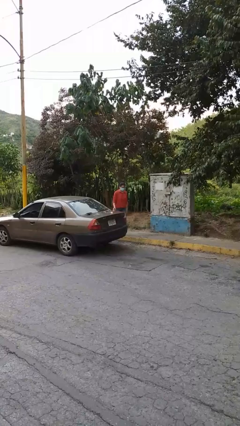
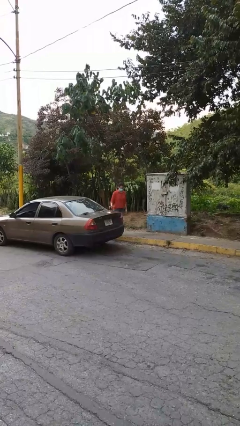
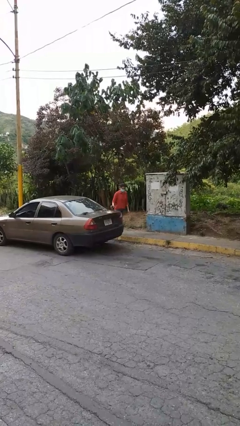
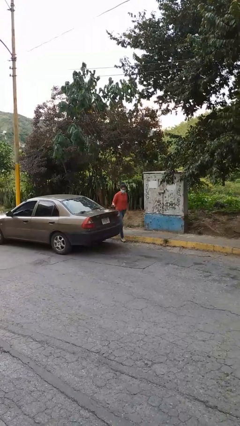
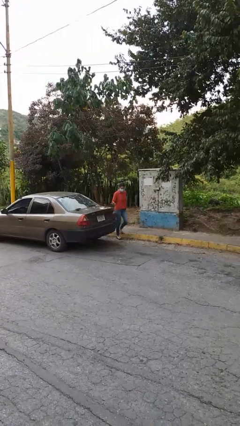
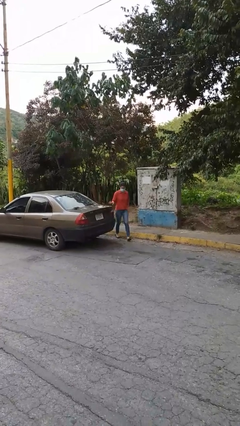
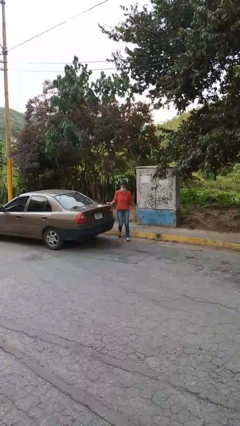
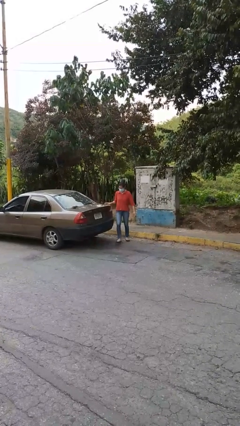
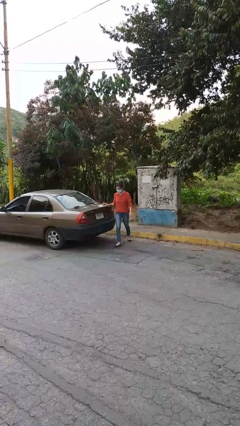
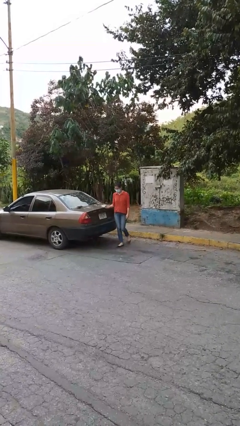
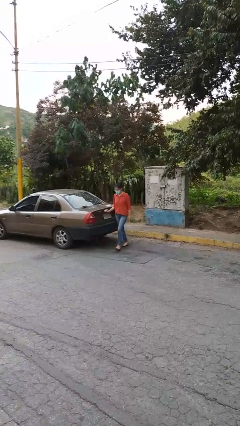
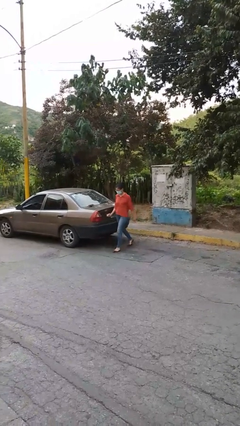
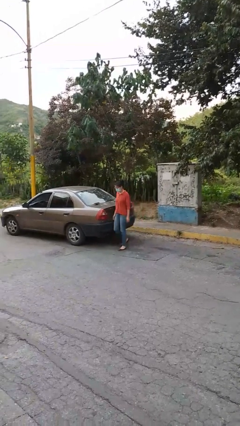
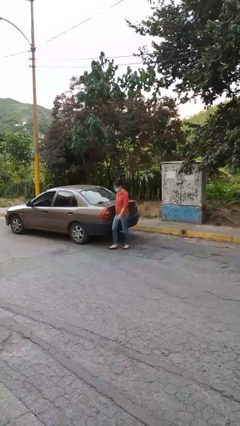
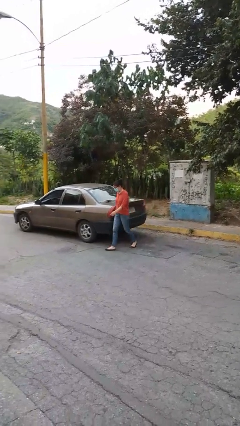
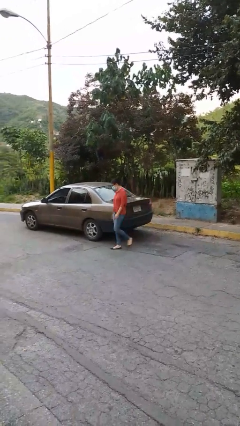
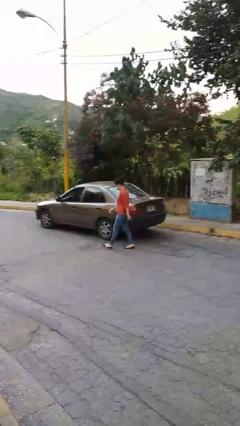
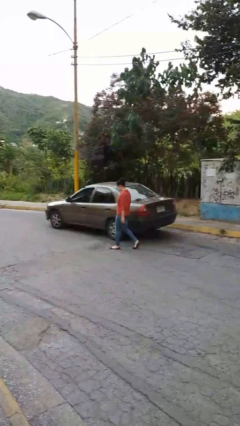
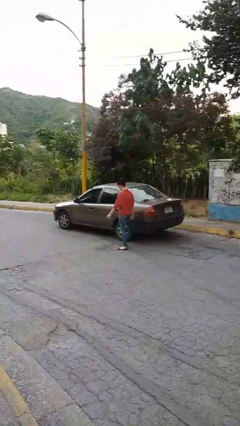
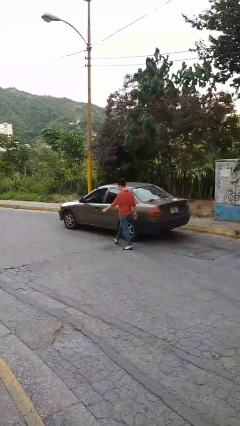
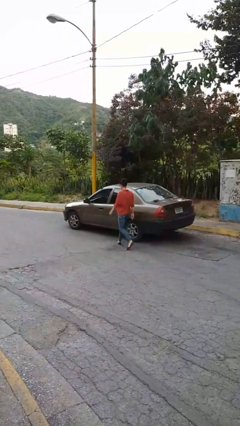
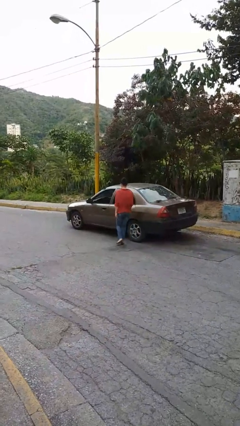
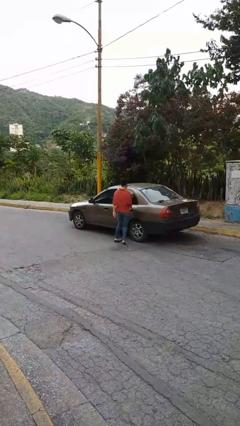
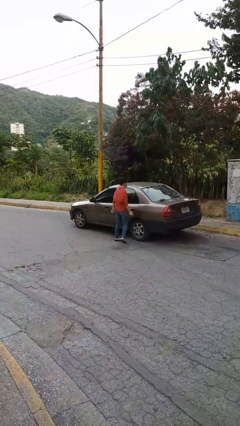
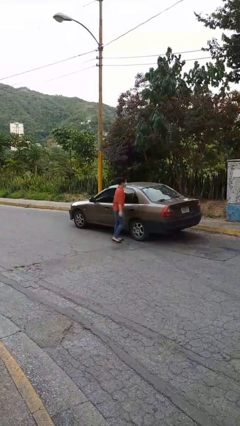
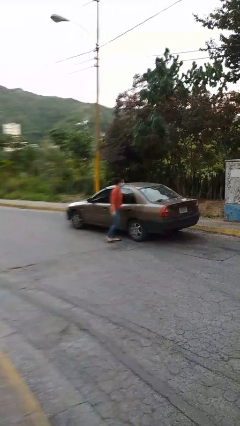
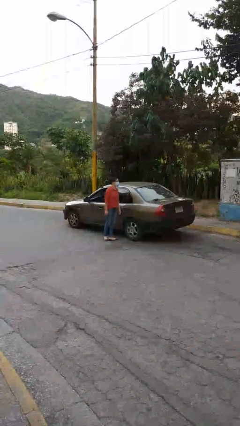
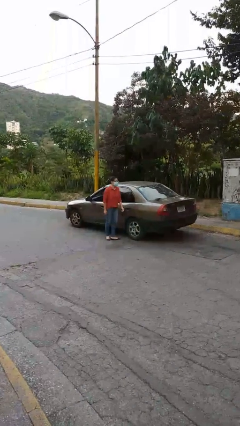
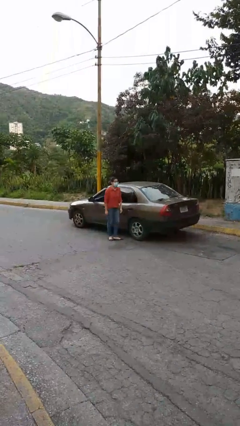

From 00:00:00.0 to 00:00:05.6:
person walks around car

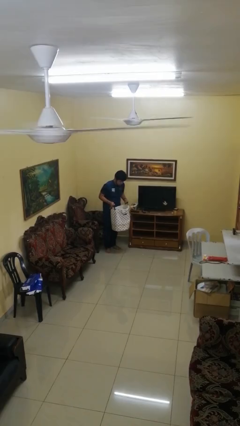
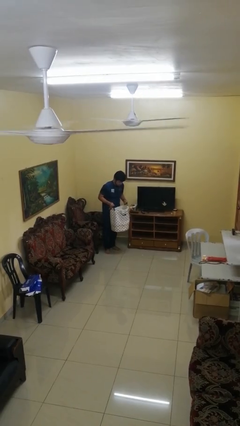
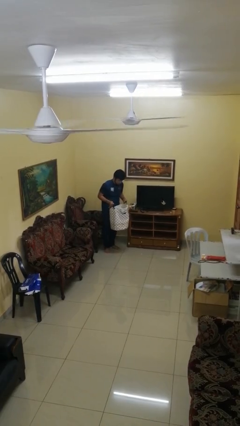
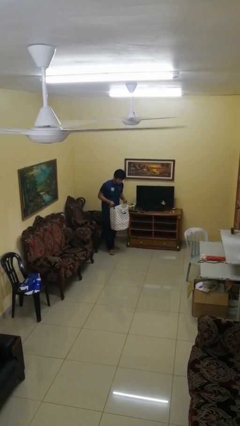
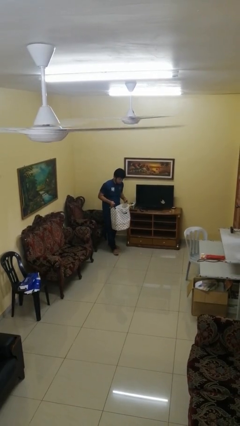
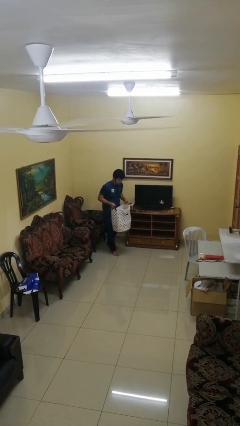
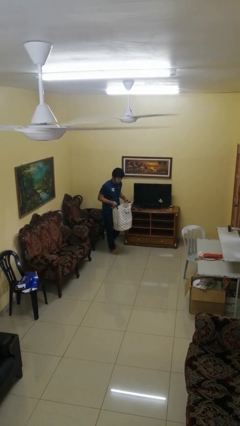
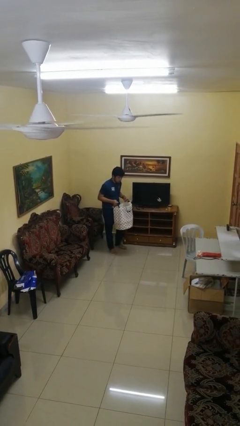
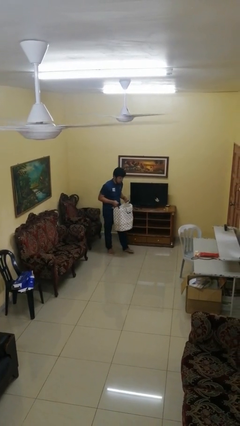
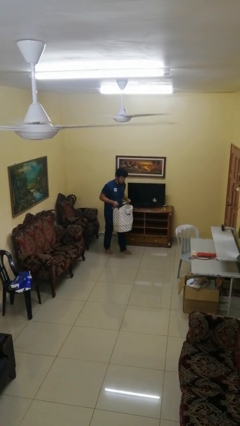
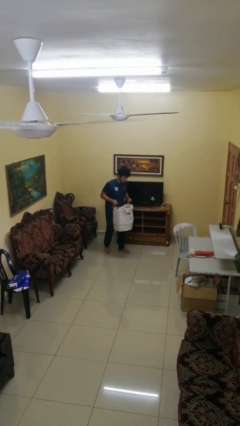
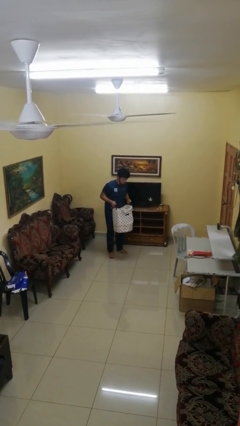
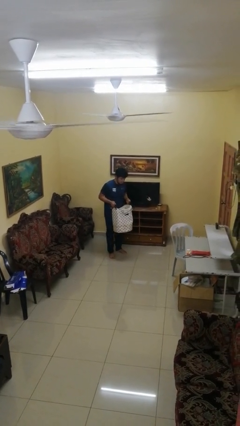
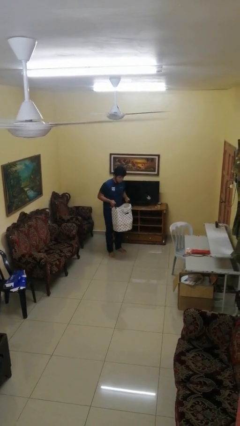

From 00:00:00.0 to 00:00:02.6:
person carries laundry basket

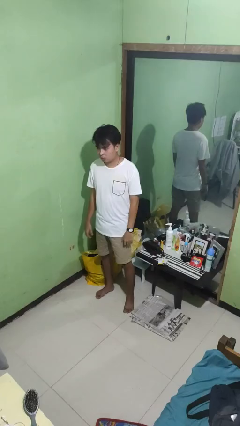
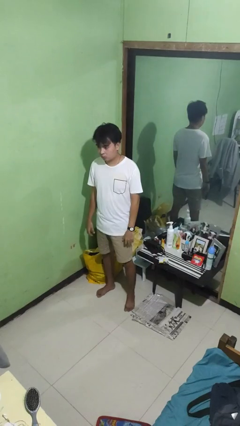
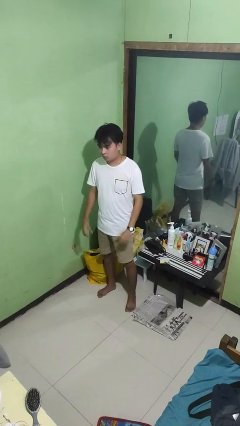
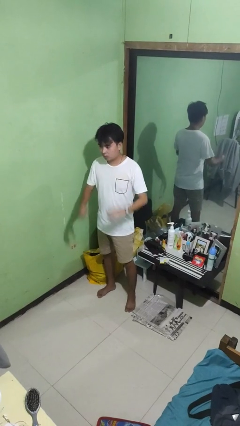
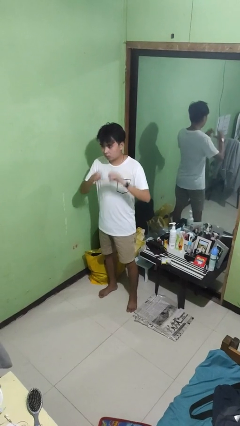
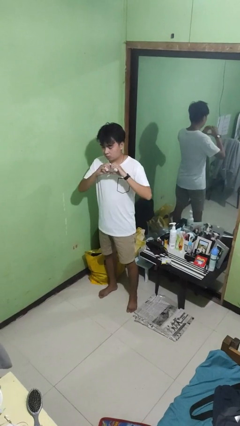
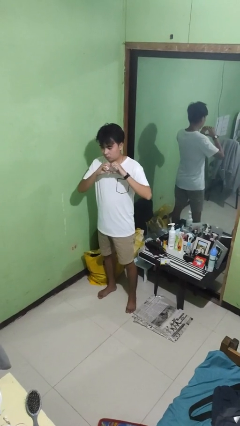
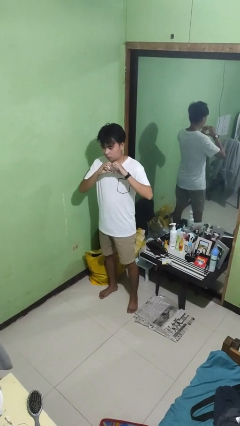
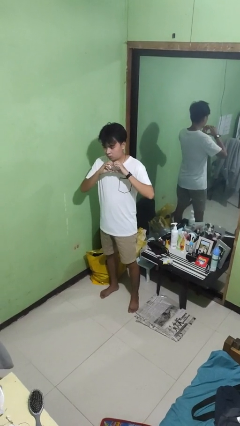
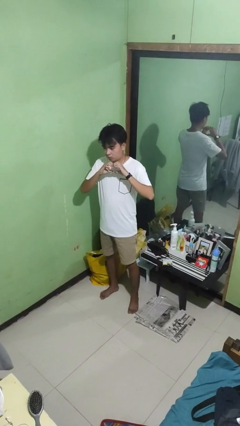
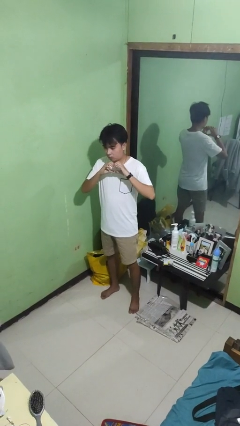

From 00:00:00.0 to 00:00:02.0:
person gestures heart

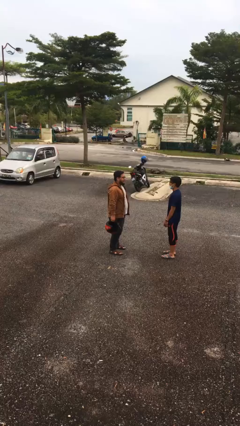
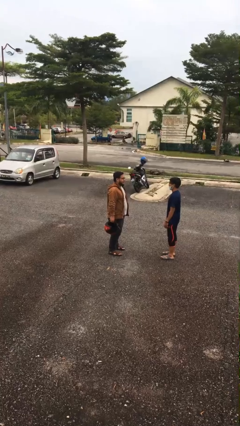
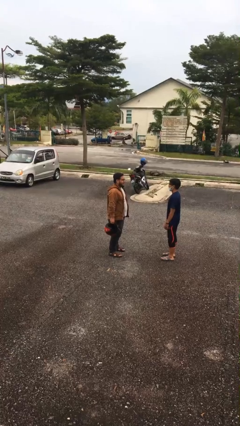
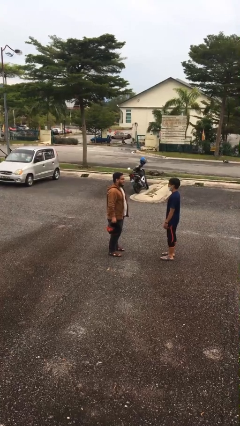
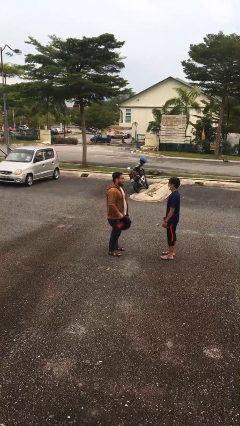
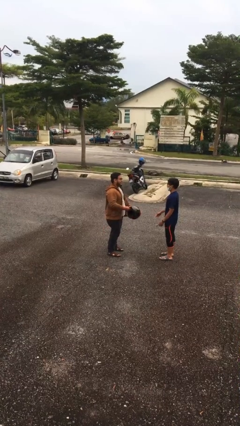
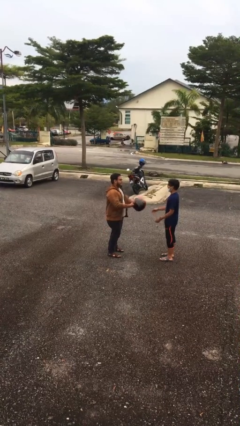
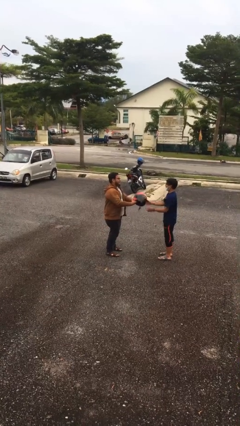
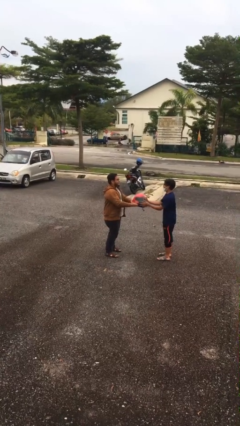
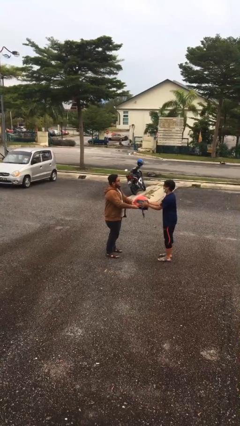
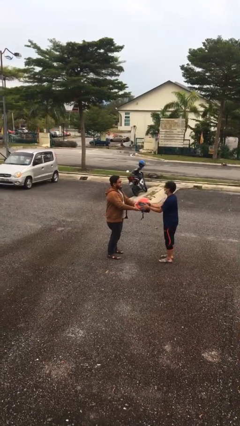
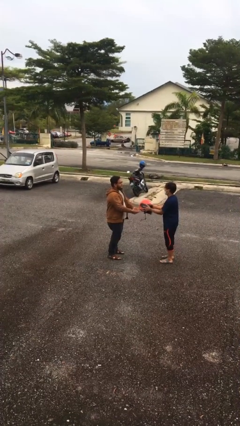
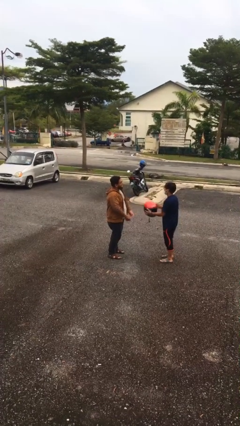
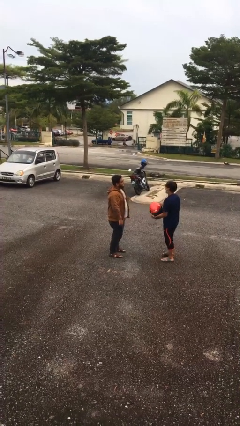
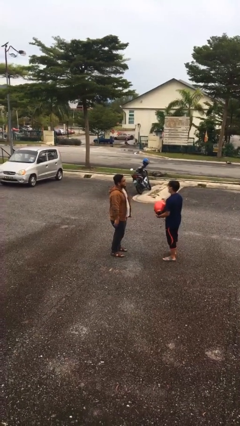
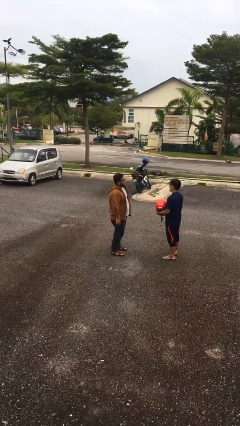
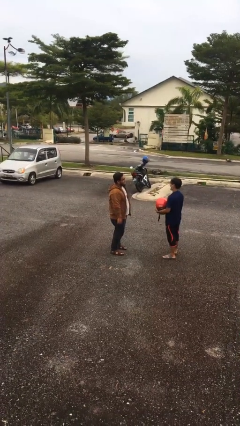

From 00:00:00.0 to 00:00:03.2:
person transfers object to person

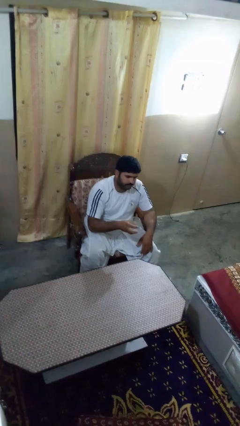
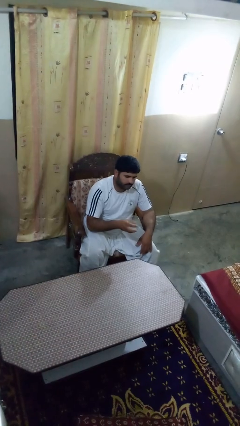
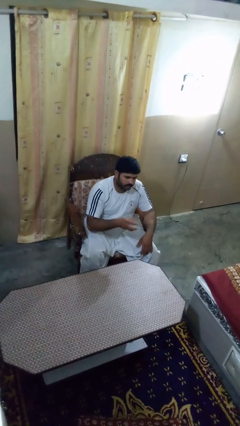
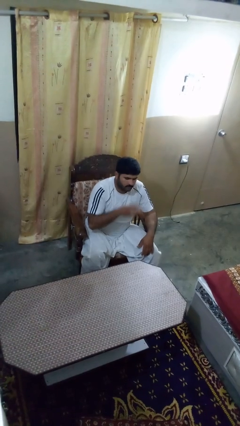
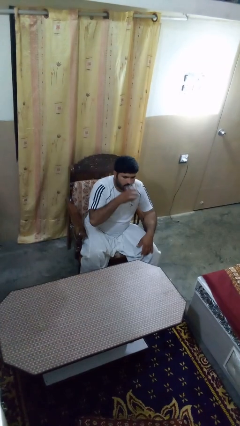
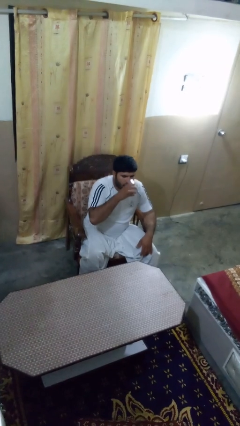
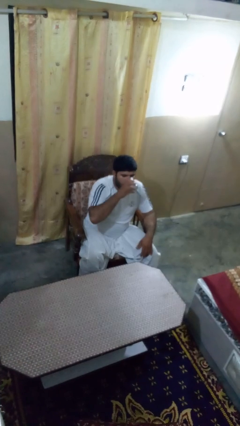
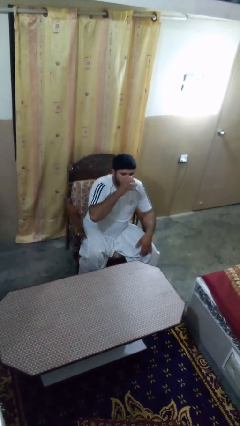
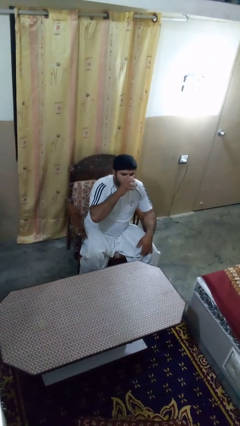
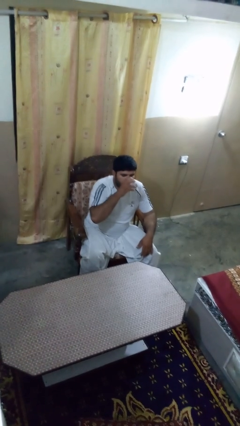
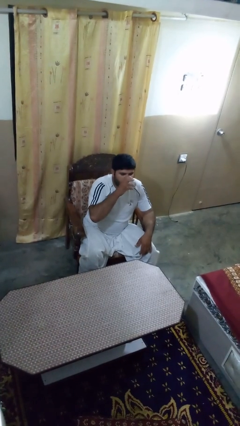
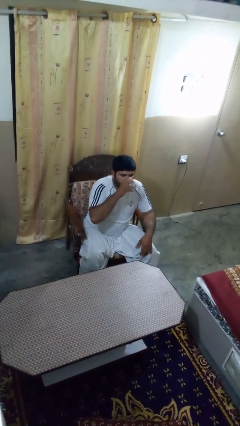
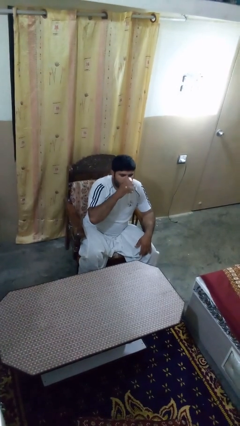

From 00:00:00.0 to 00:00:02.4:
person drinks from shotglass

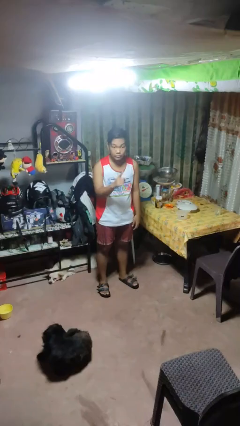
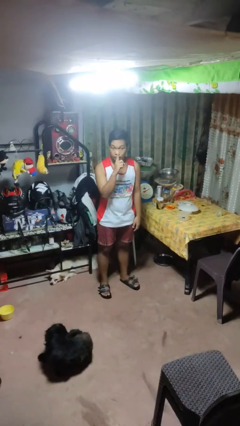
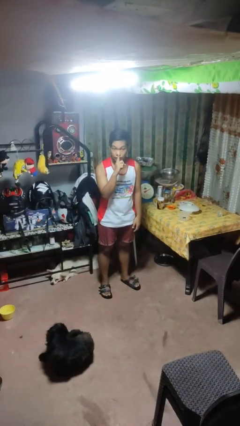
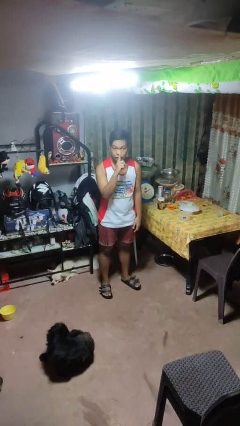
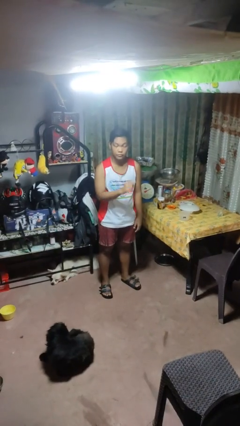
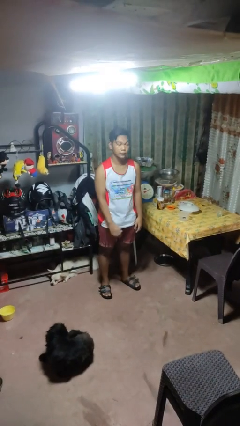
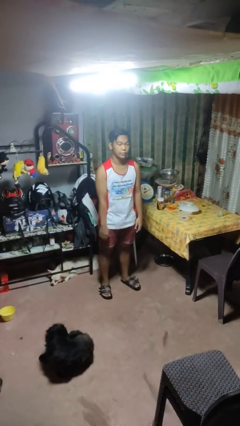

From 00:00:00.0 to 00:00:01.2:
person gestures be quiet

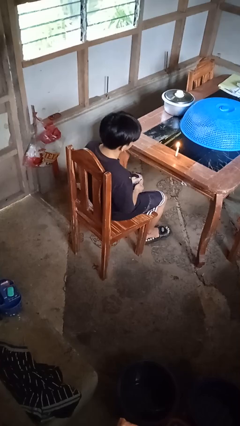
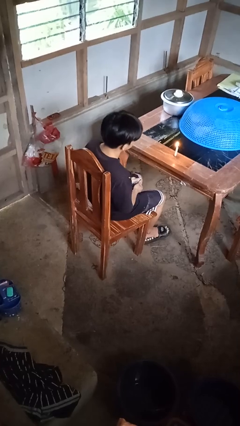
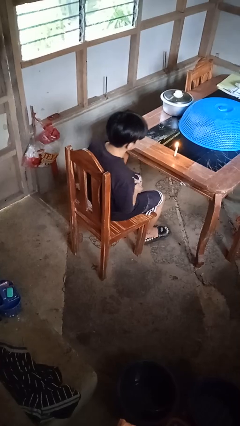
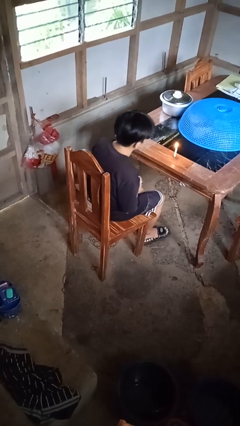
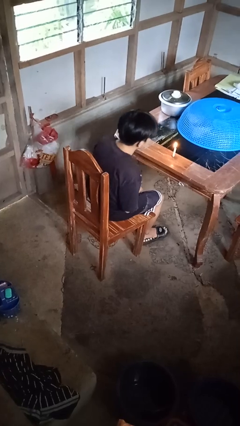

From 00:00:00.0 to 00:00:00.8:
person extinguishes candle
